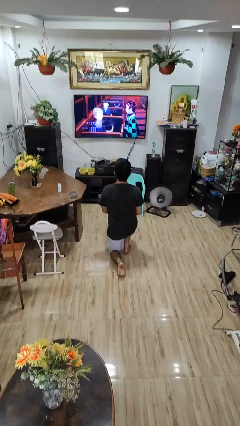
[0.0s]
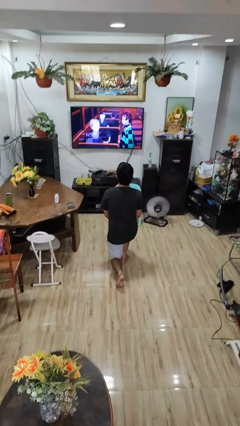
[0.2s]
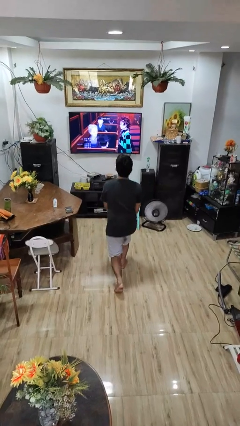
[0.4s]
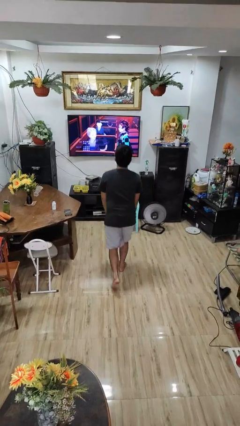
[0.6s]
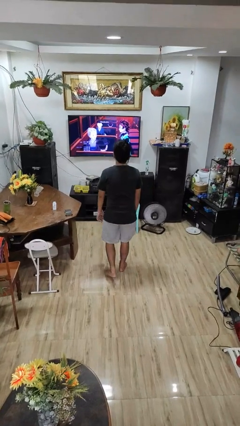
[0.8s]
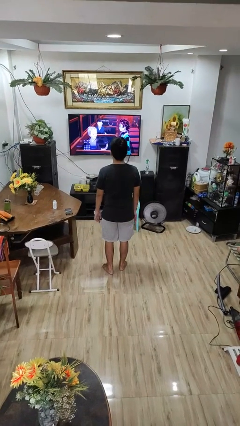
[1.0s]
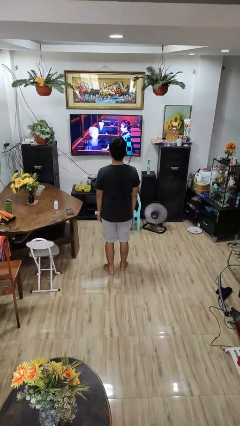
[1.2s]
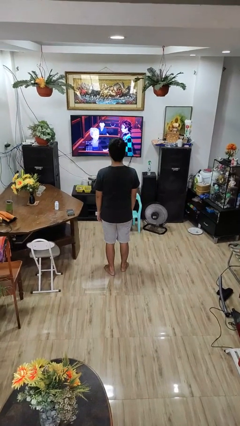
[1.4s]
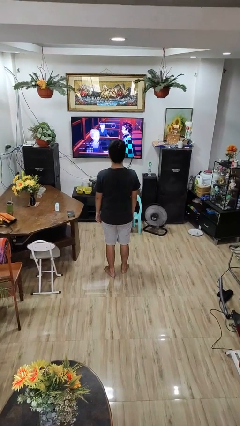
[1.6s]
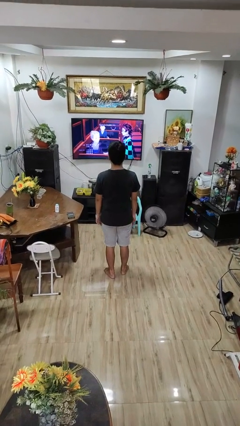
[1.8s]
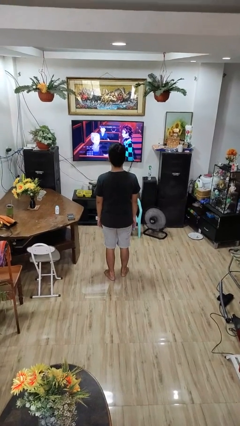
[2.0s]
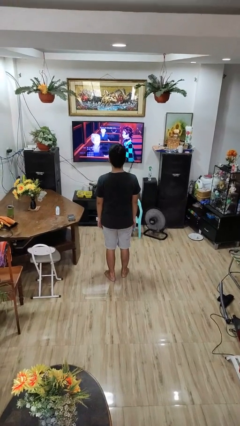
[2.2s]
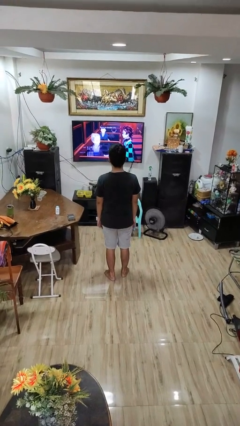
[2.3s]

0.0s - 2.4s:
person stands up from floor

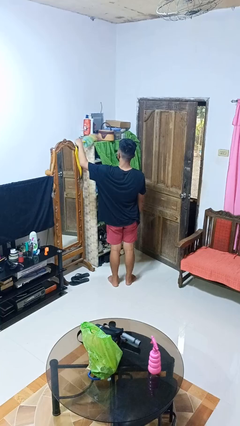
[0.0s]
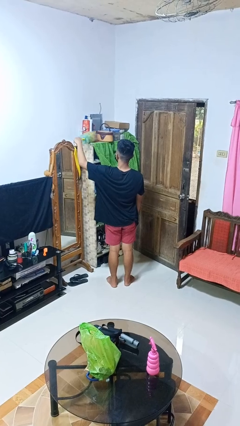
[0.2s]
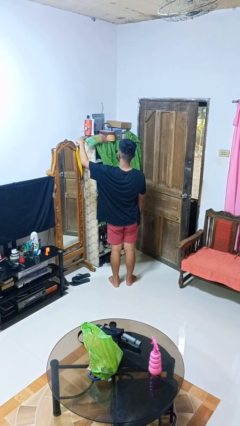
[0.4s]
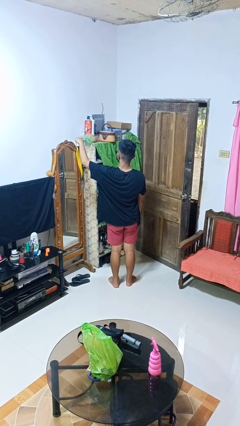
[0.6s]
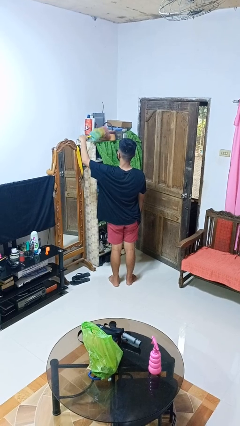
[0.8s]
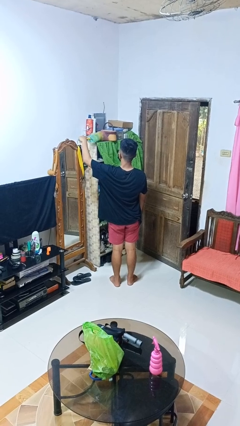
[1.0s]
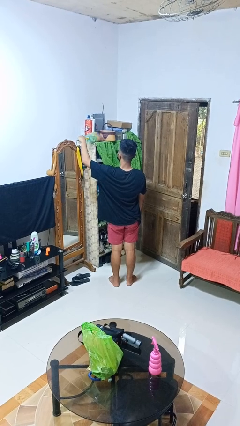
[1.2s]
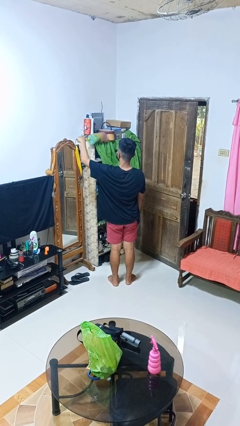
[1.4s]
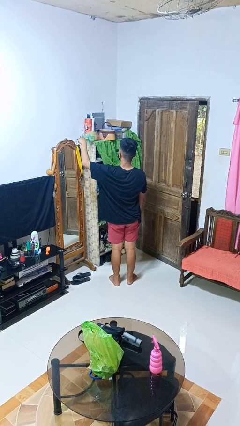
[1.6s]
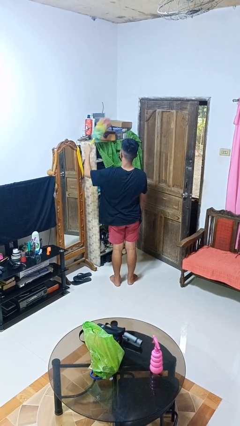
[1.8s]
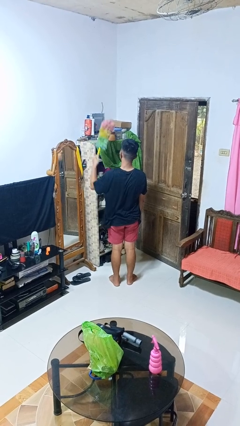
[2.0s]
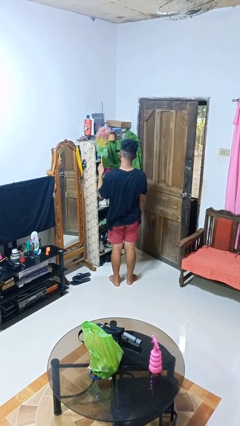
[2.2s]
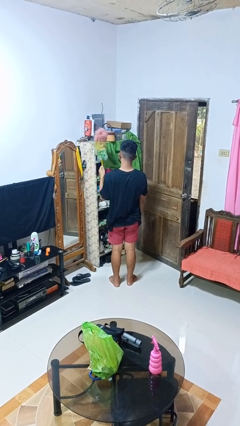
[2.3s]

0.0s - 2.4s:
person dusts furniture

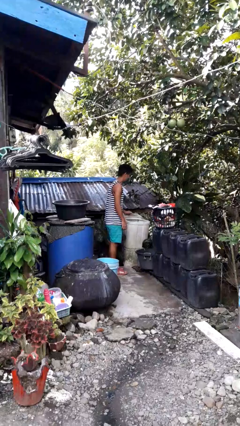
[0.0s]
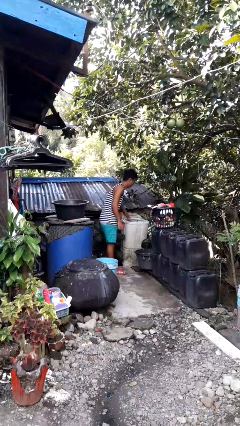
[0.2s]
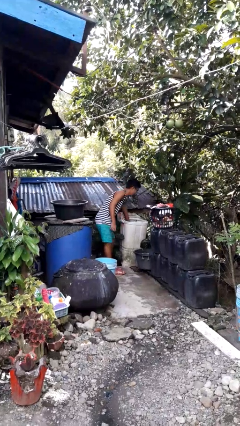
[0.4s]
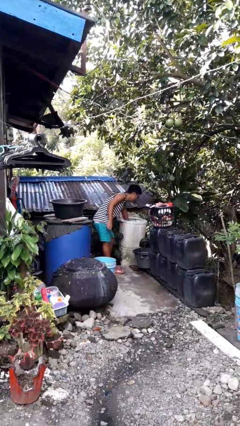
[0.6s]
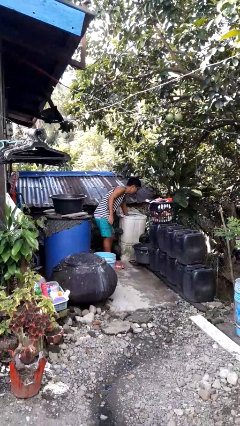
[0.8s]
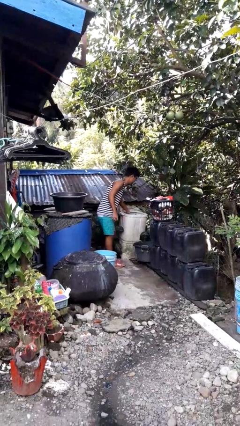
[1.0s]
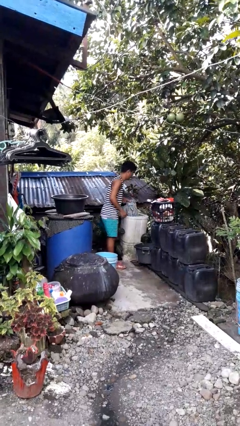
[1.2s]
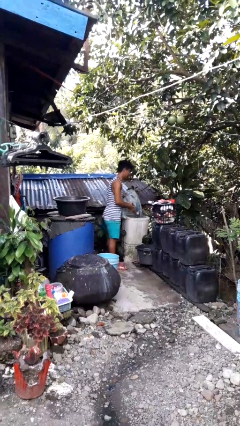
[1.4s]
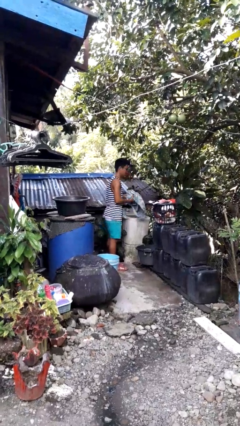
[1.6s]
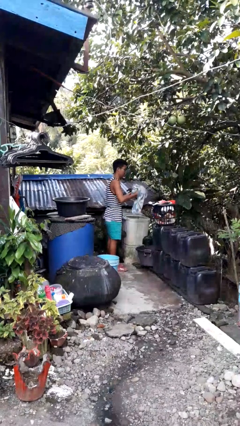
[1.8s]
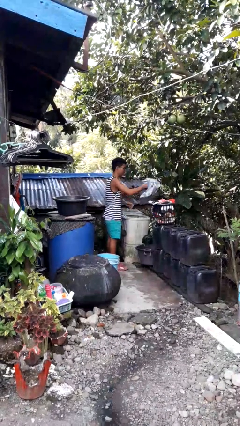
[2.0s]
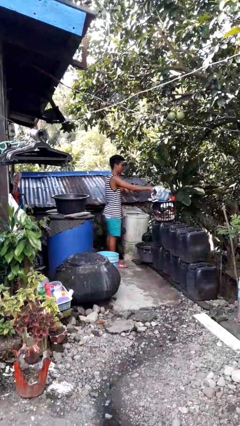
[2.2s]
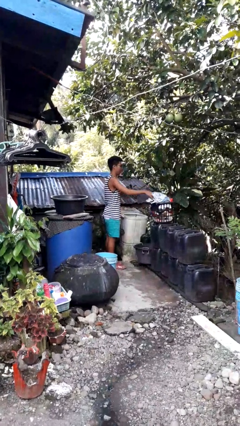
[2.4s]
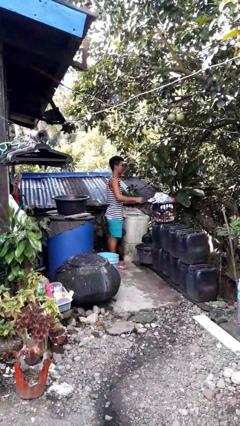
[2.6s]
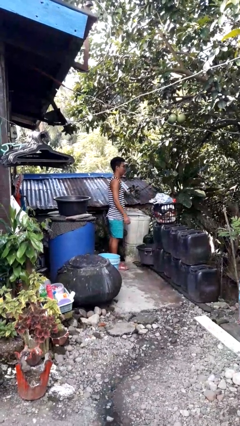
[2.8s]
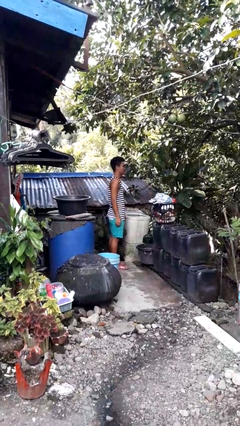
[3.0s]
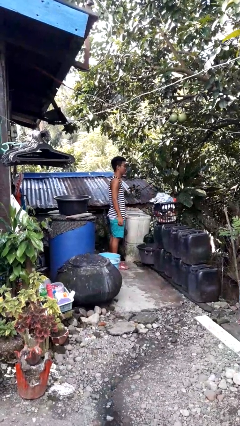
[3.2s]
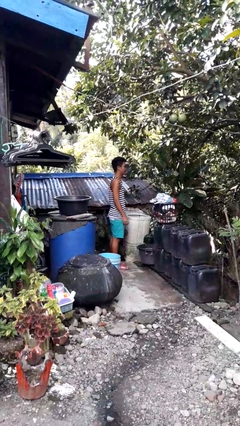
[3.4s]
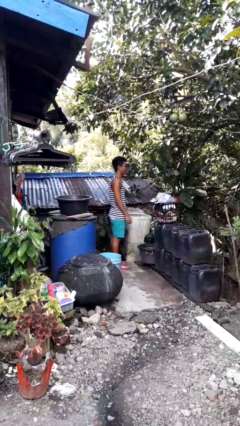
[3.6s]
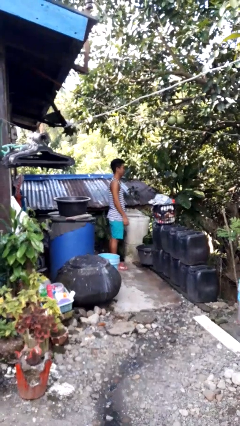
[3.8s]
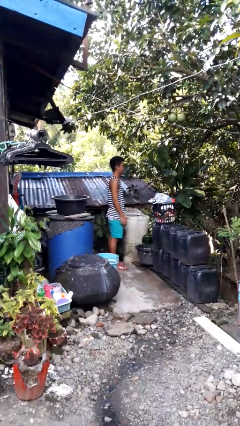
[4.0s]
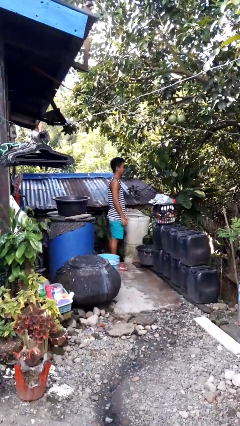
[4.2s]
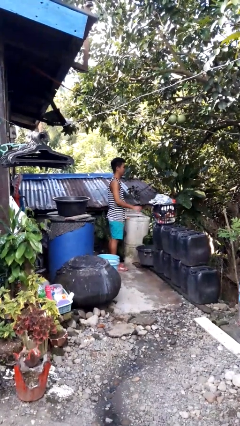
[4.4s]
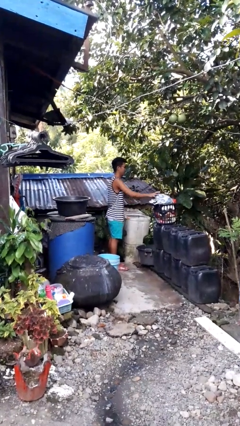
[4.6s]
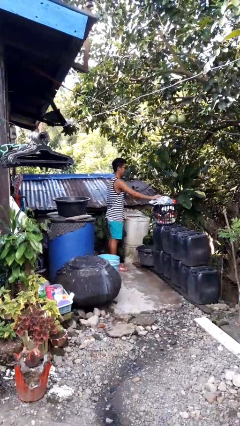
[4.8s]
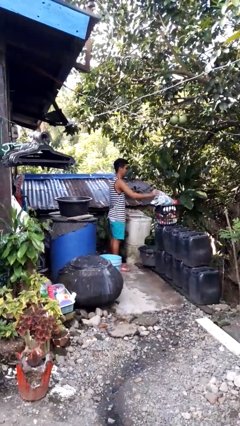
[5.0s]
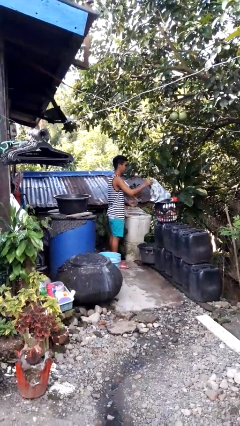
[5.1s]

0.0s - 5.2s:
person unloads clotheswasher

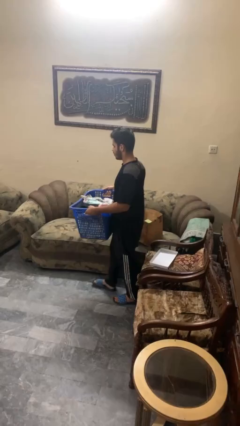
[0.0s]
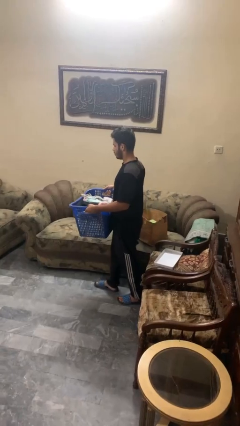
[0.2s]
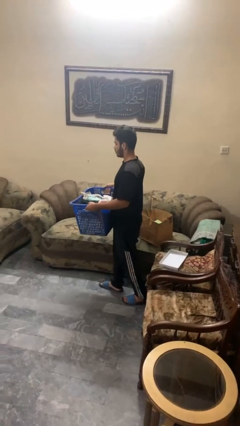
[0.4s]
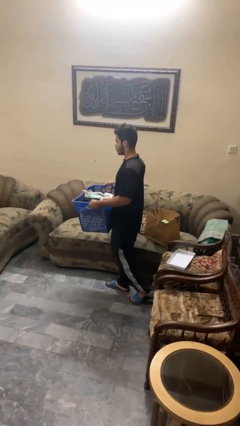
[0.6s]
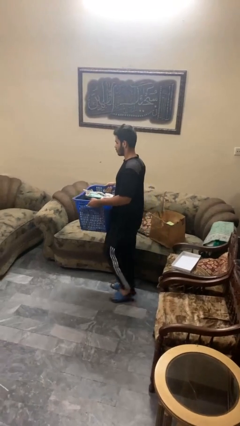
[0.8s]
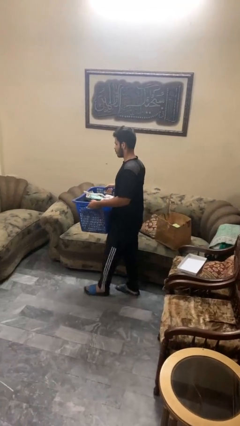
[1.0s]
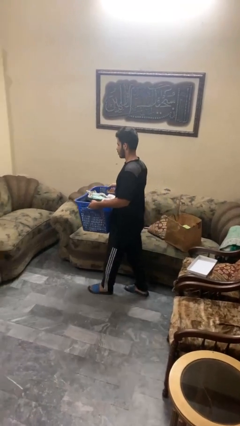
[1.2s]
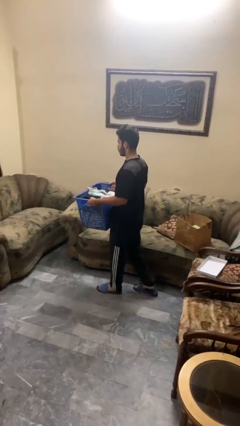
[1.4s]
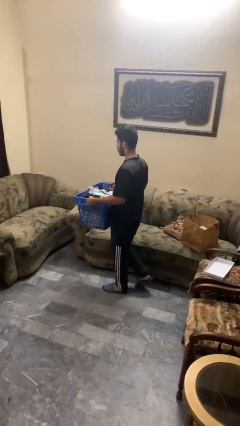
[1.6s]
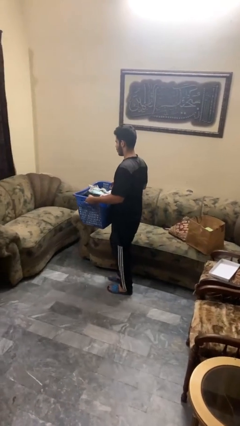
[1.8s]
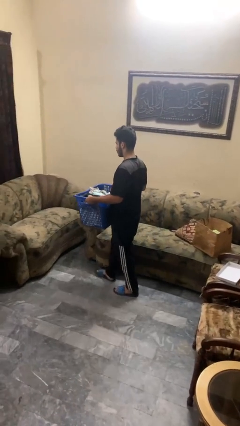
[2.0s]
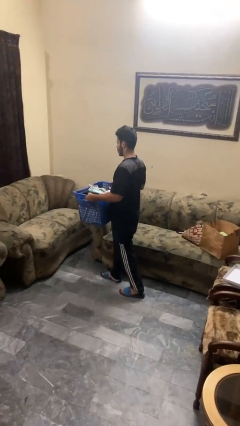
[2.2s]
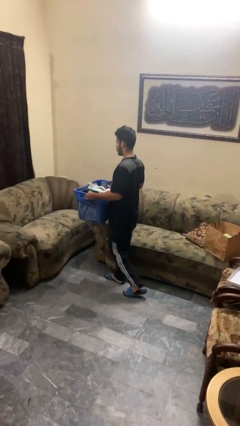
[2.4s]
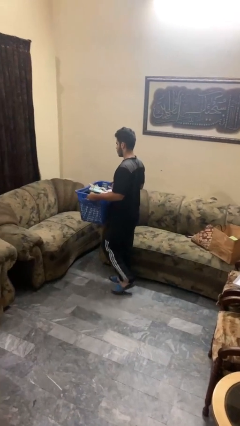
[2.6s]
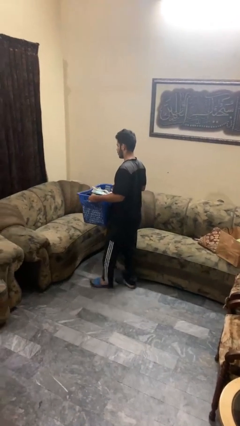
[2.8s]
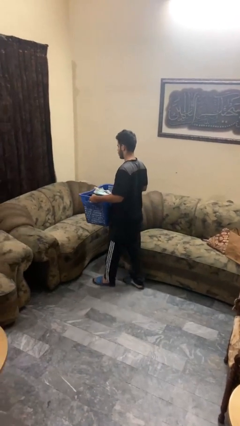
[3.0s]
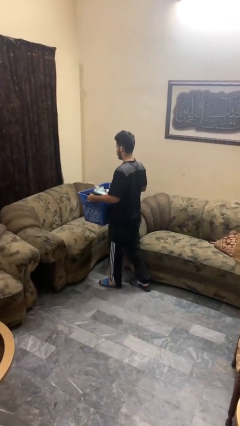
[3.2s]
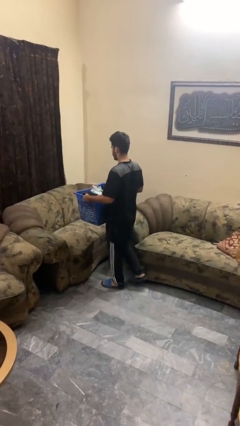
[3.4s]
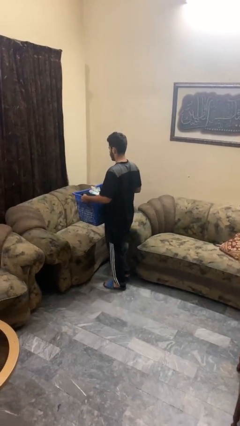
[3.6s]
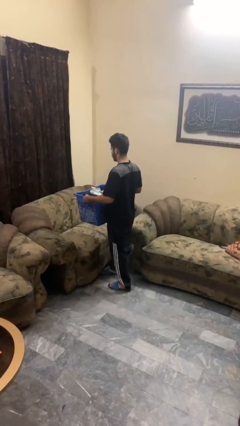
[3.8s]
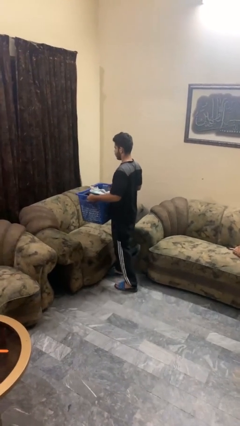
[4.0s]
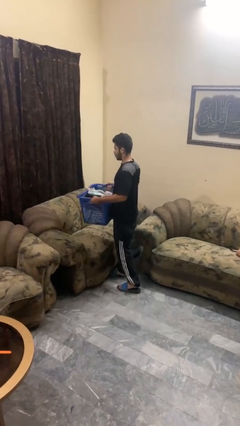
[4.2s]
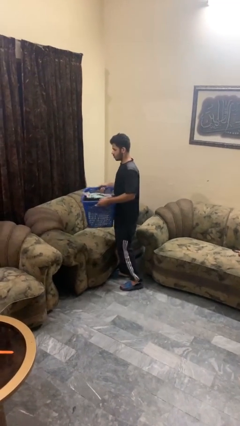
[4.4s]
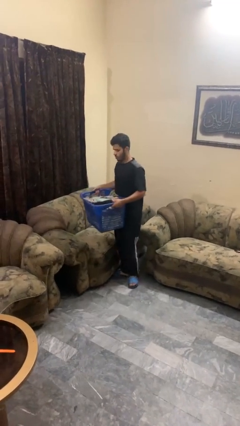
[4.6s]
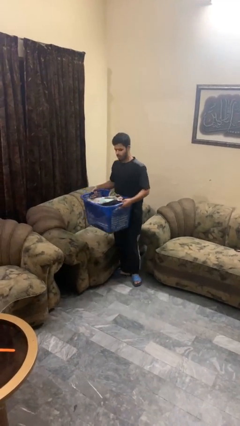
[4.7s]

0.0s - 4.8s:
person carries laundry basket

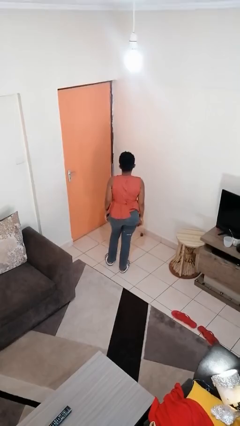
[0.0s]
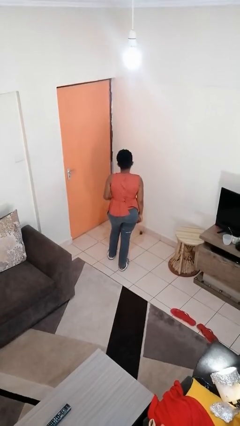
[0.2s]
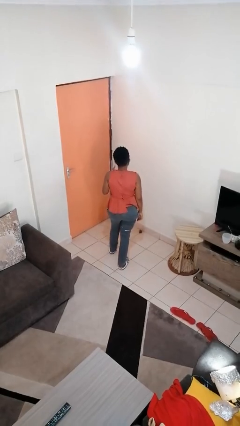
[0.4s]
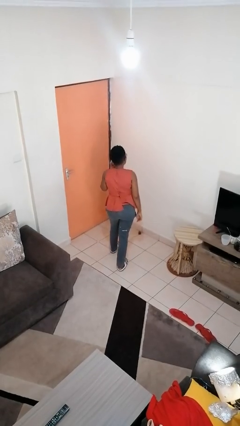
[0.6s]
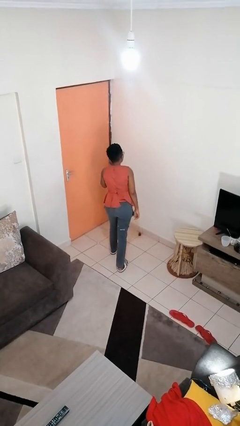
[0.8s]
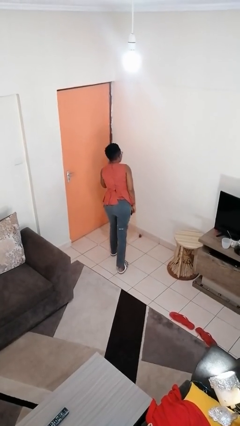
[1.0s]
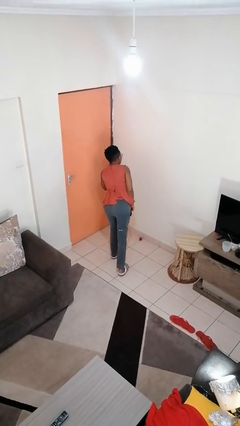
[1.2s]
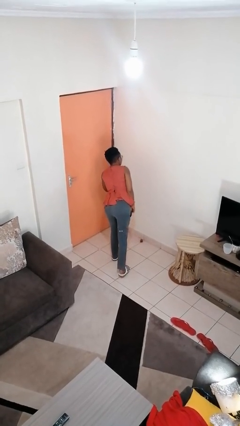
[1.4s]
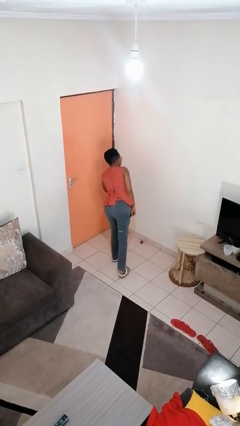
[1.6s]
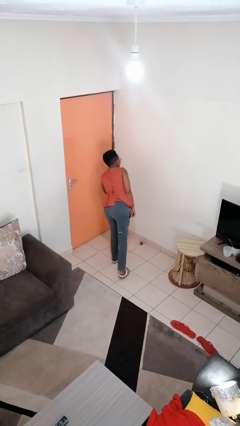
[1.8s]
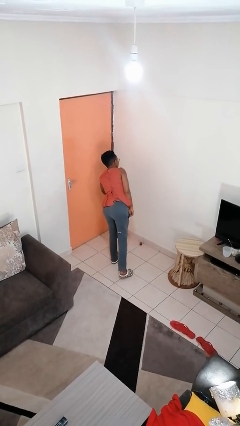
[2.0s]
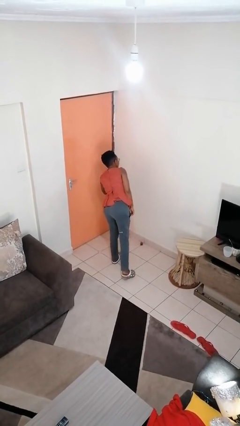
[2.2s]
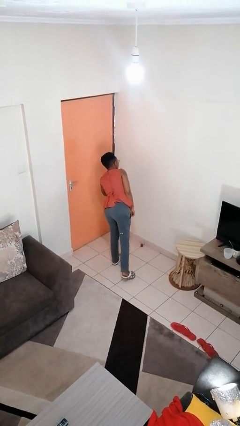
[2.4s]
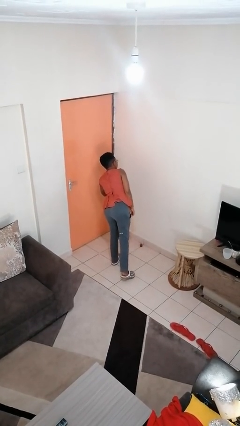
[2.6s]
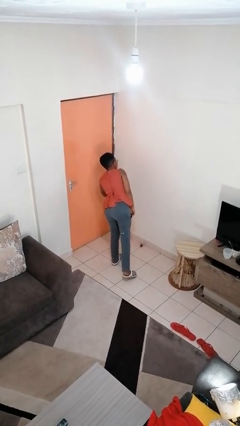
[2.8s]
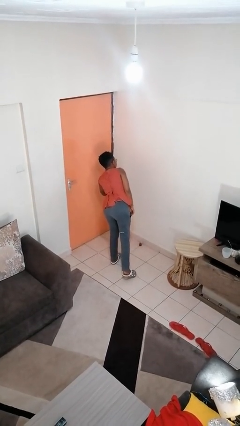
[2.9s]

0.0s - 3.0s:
person gestures listen closely
